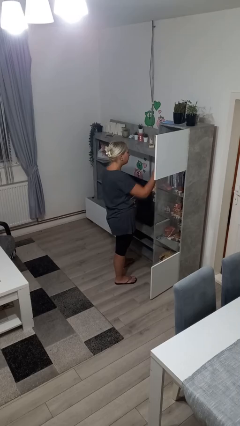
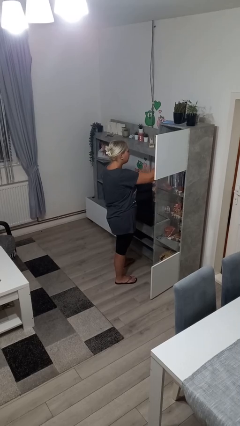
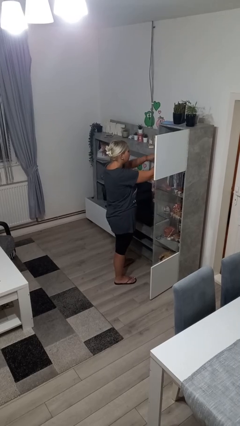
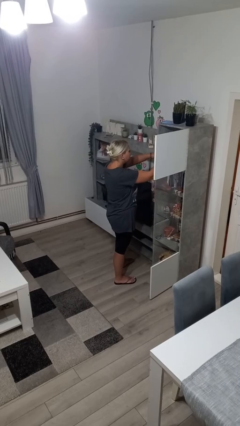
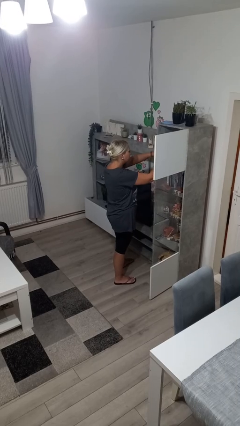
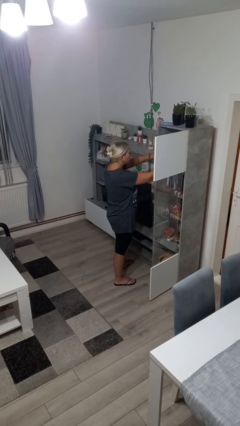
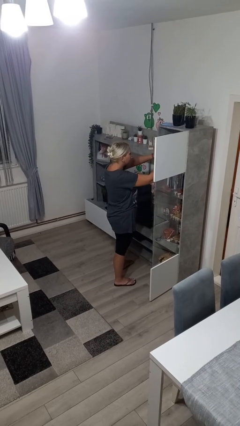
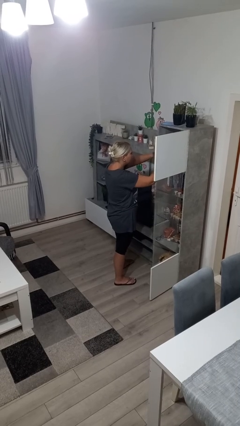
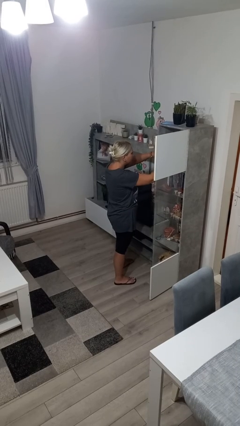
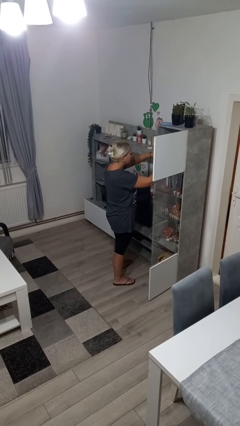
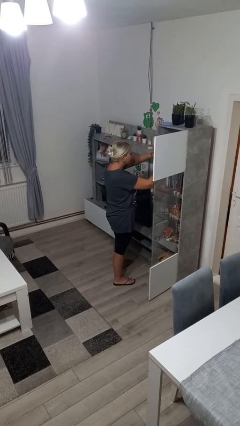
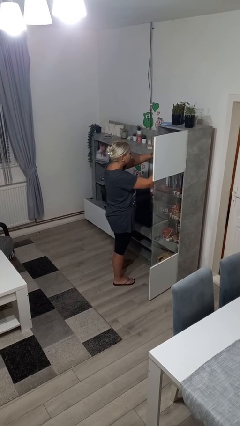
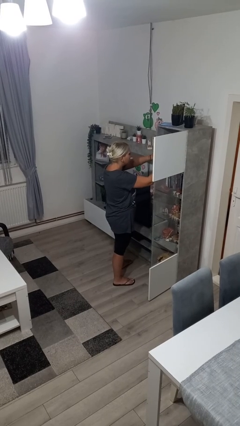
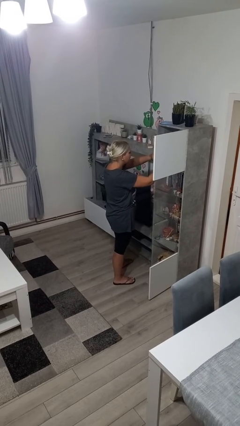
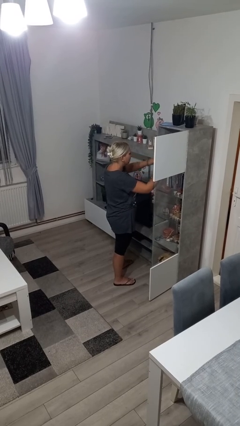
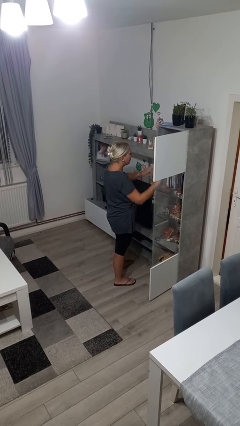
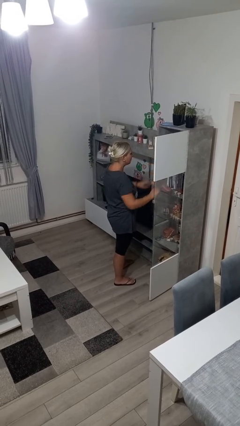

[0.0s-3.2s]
person searches in cabinet

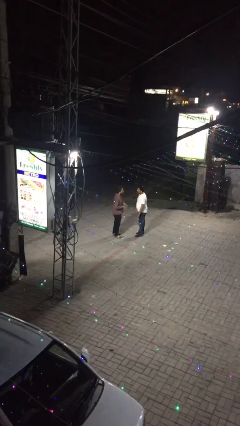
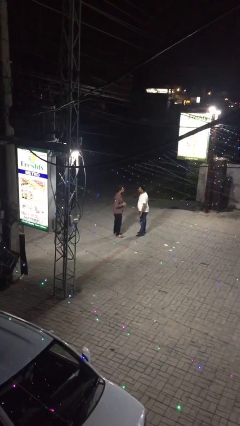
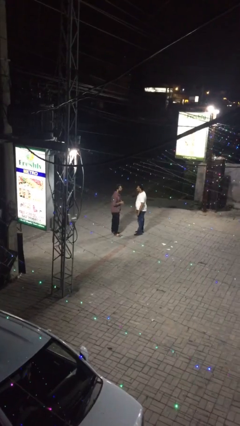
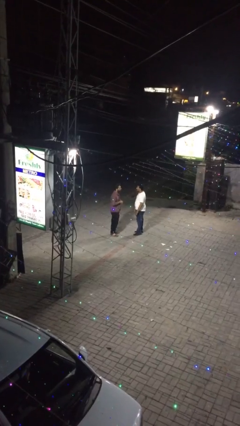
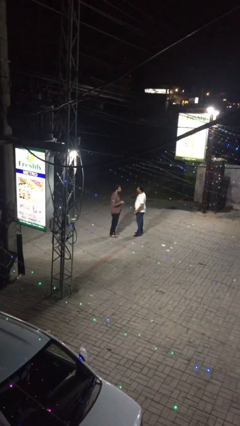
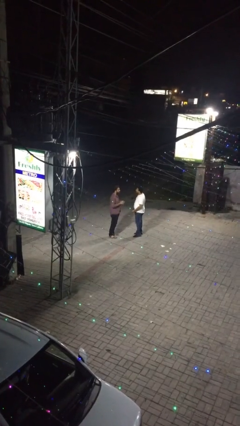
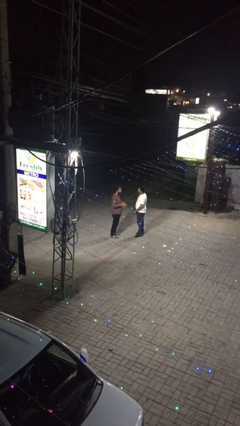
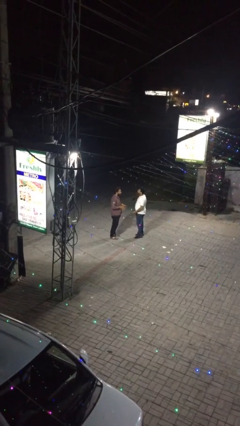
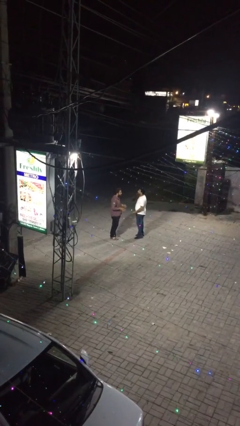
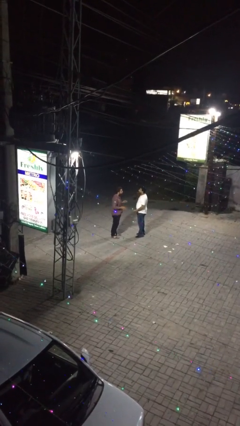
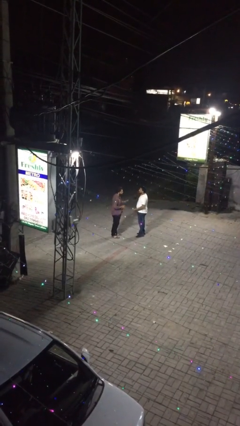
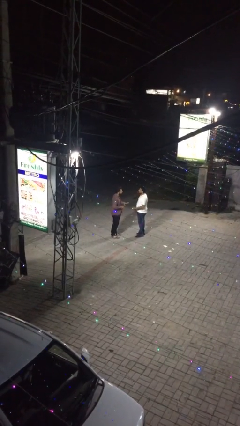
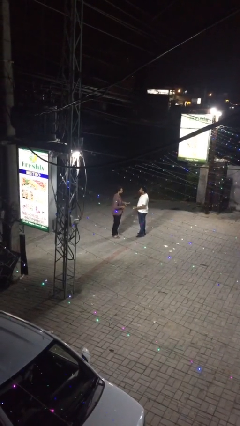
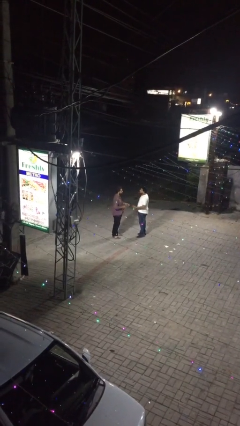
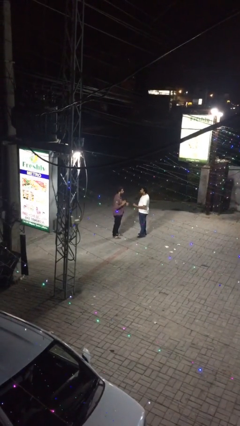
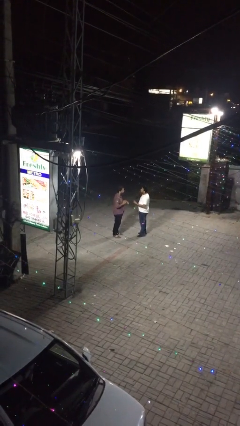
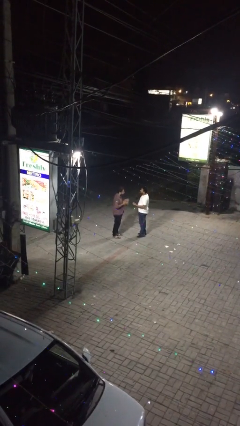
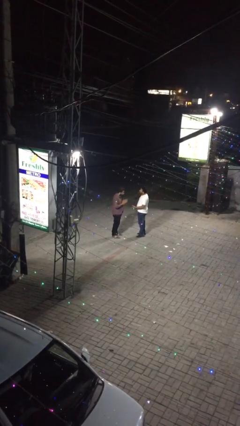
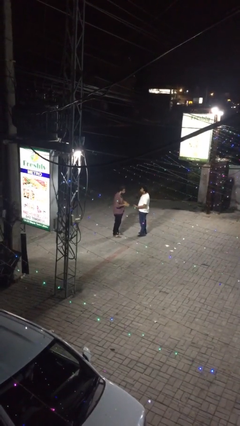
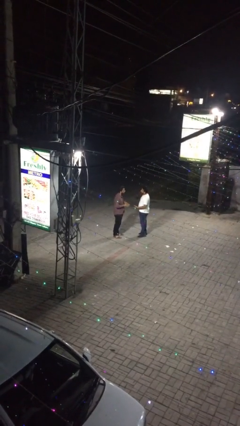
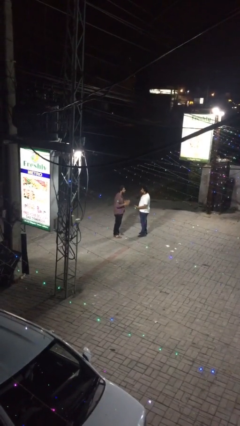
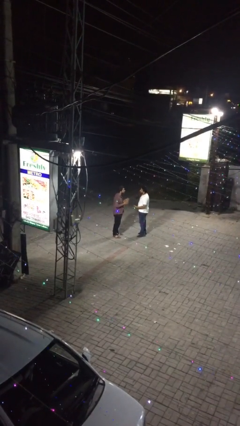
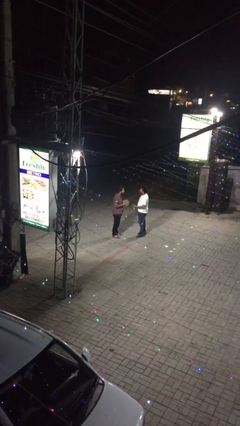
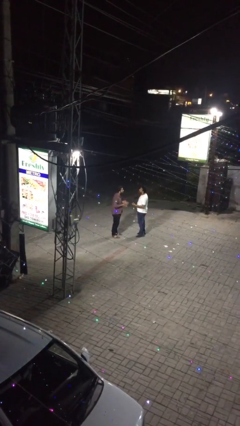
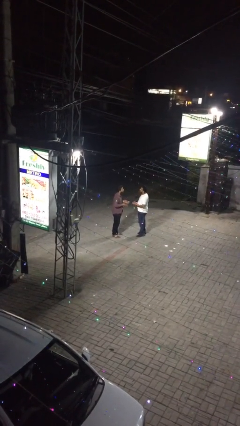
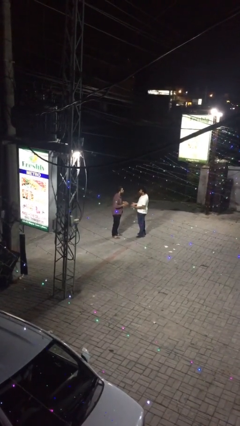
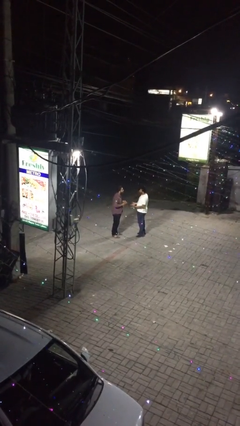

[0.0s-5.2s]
person talks to person

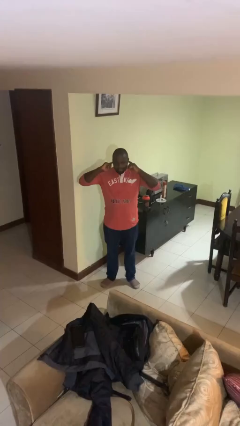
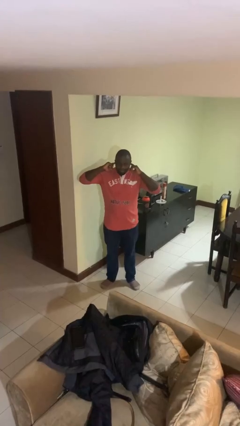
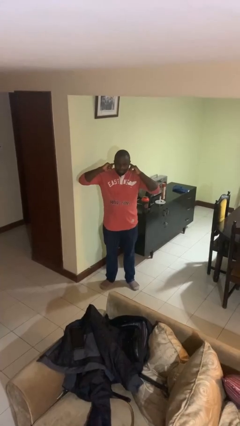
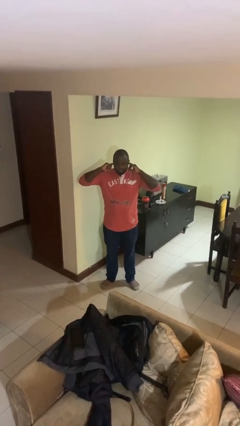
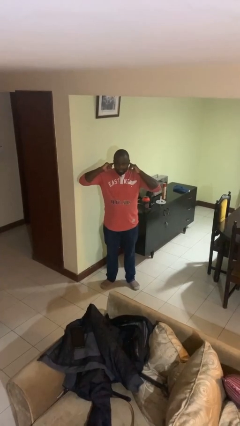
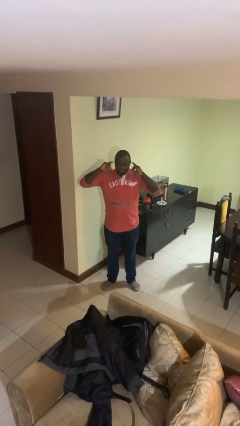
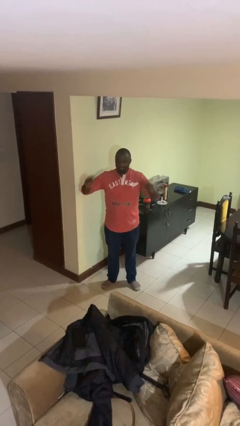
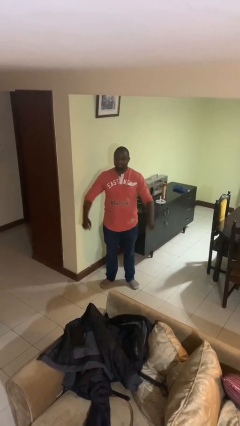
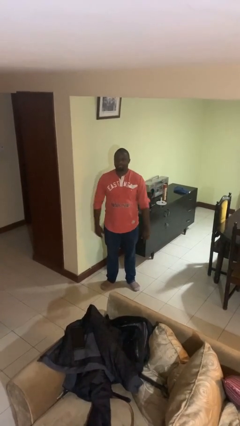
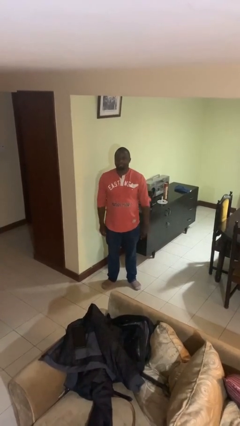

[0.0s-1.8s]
person puts fingers in ear

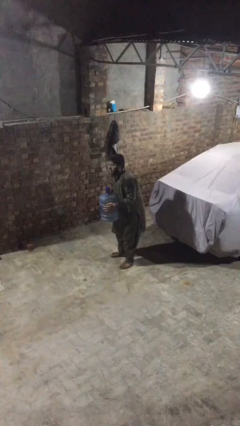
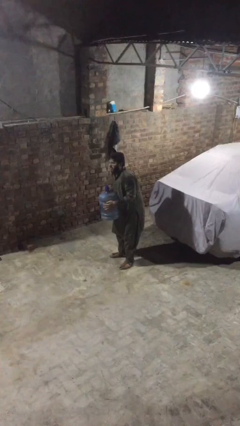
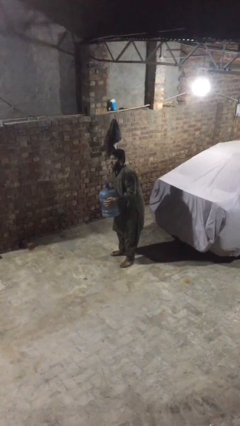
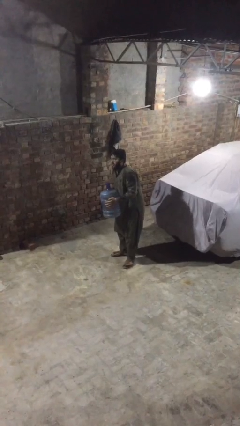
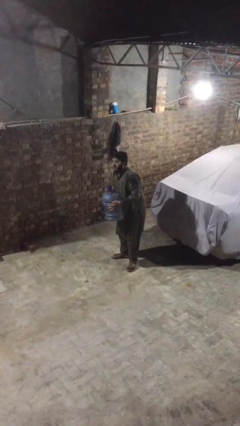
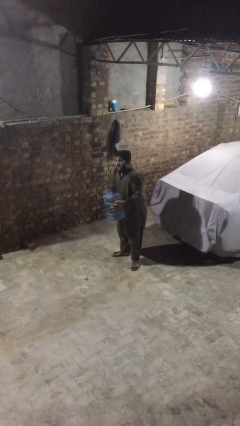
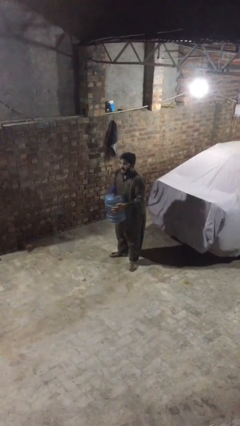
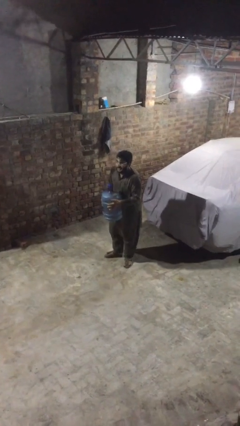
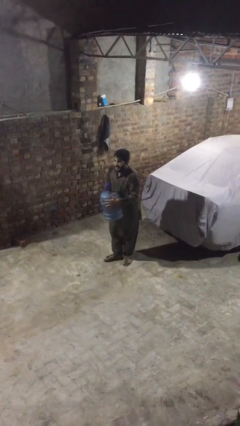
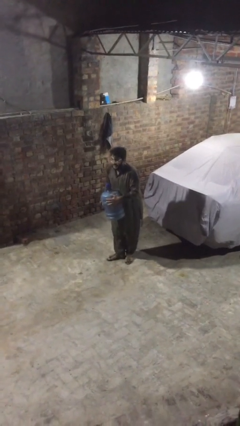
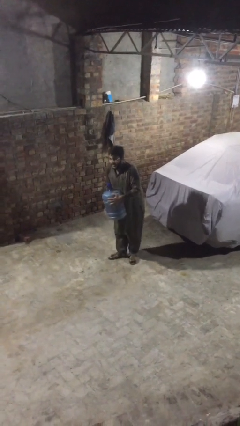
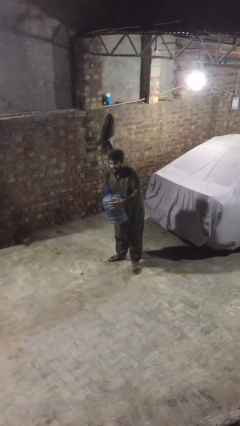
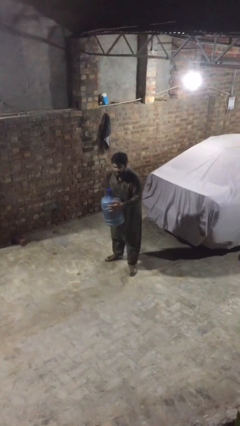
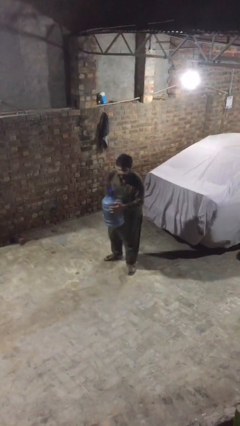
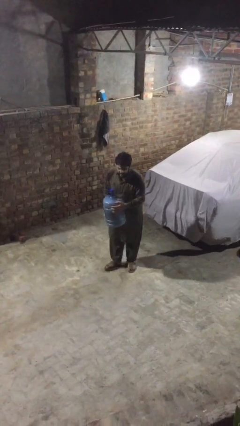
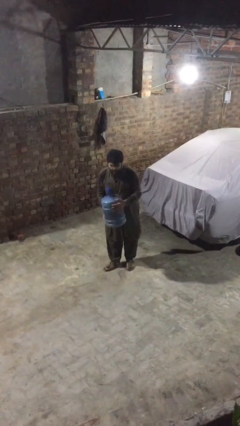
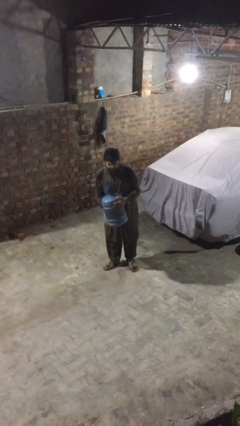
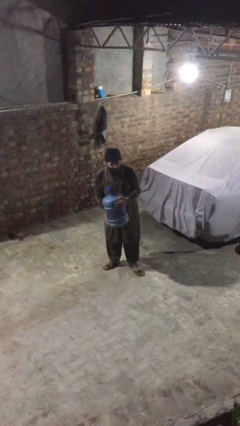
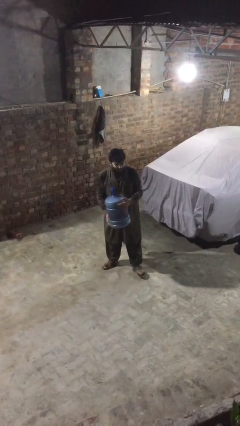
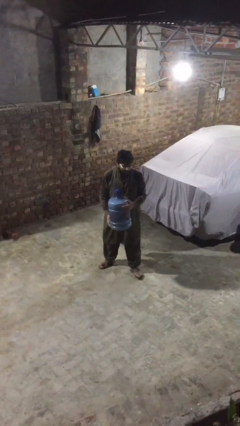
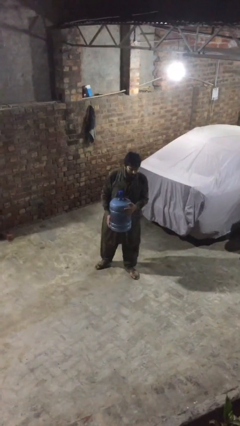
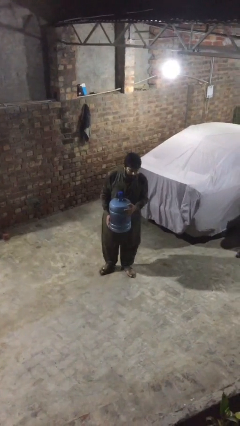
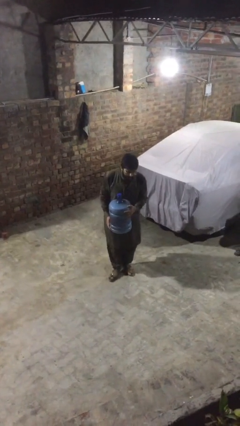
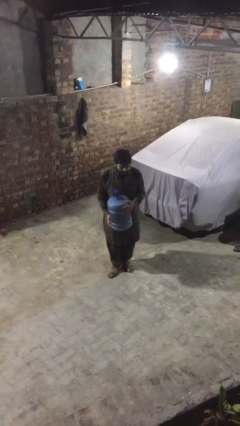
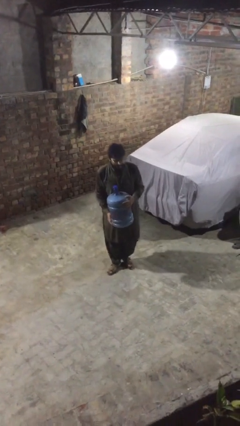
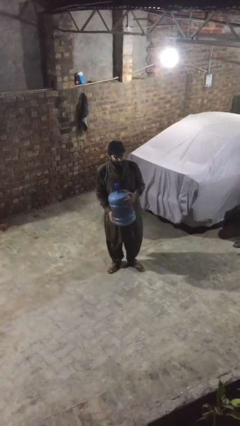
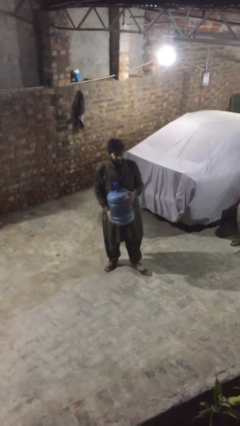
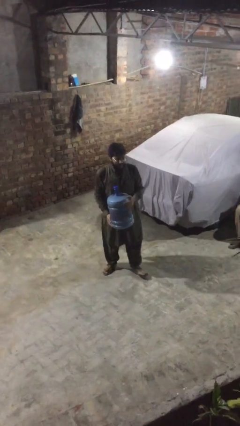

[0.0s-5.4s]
person carries heavy object

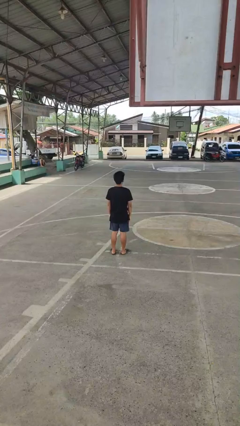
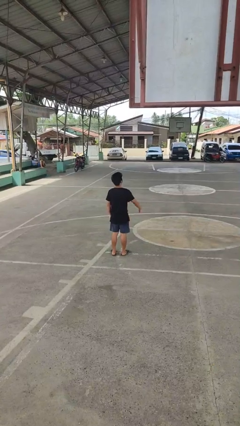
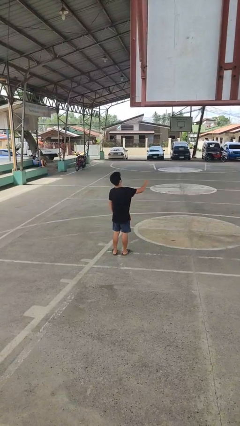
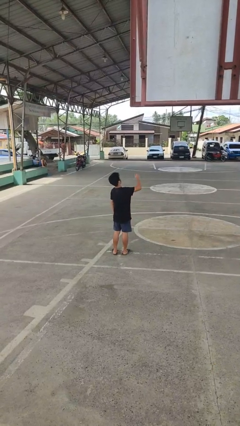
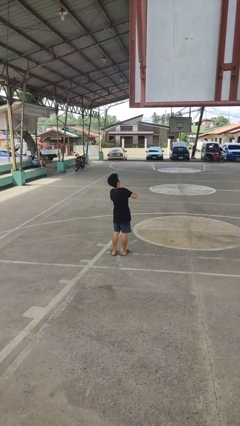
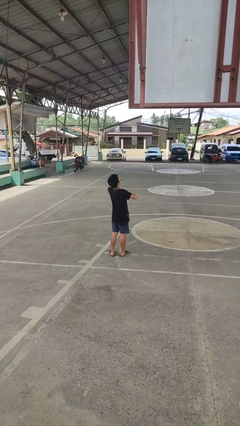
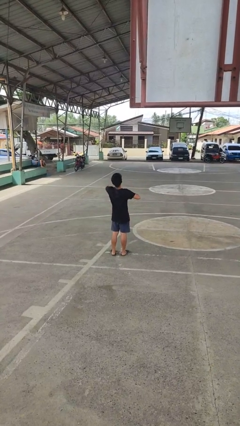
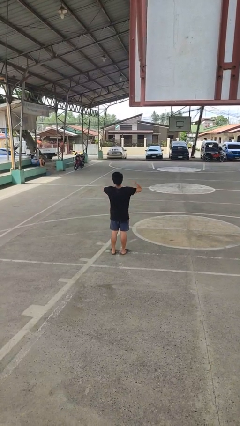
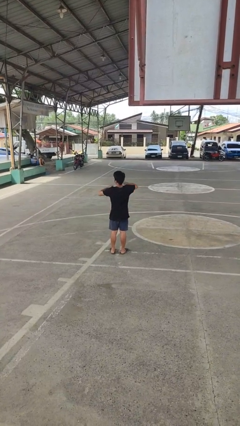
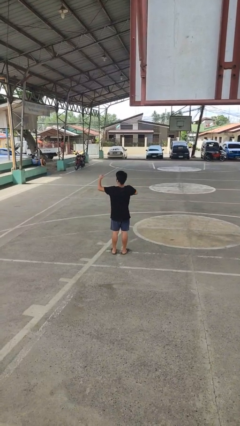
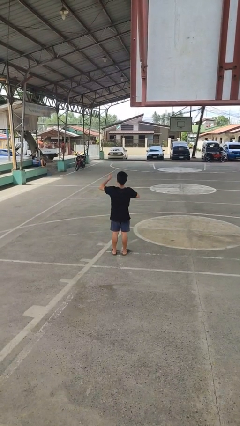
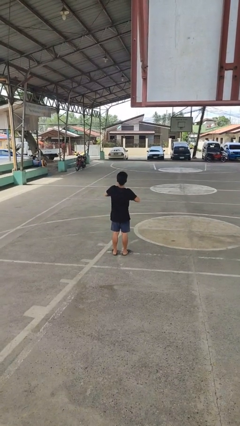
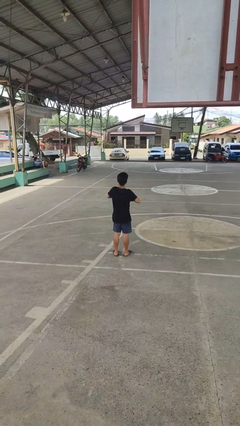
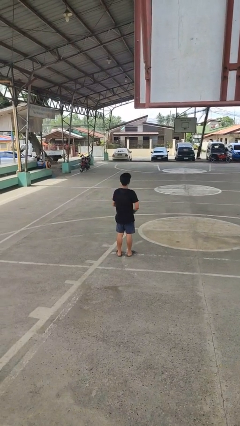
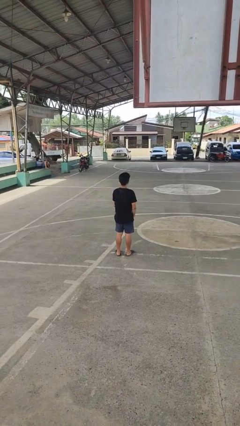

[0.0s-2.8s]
person drums on chest
